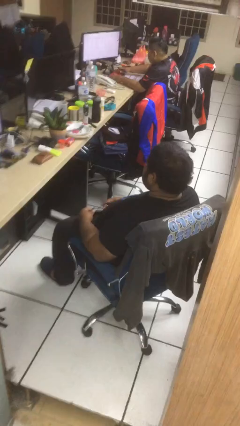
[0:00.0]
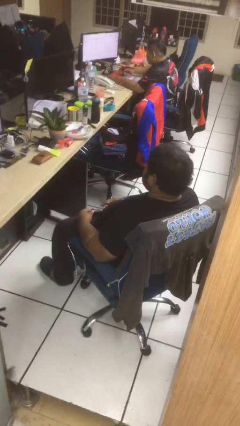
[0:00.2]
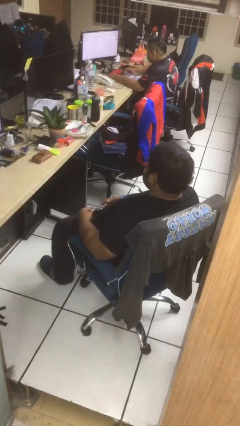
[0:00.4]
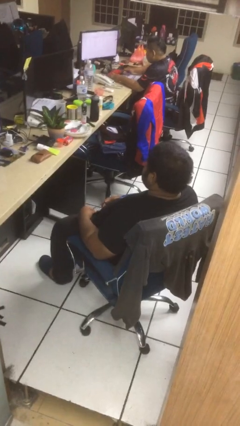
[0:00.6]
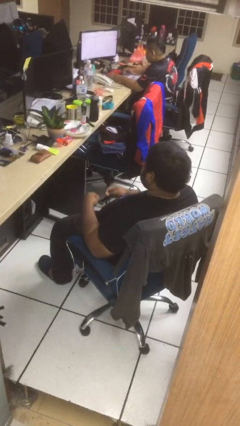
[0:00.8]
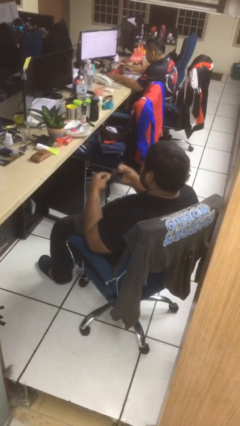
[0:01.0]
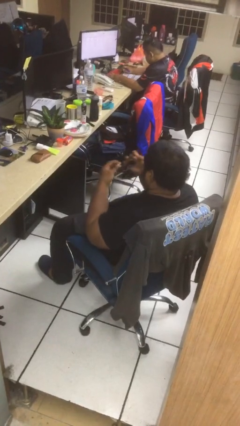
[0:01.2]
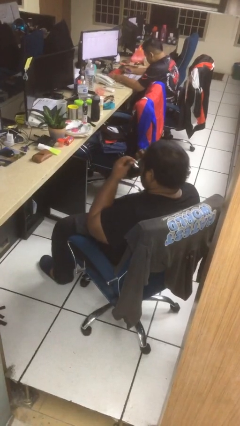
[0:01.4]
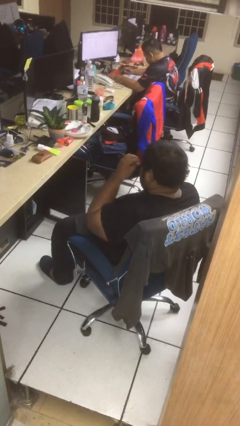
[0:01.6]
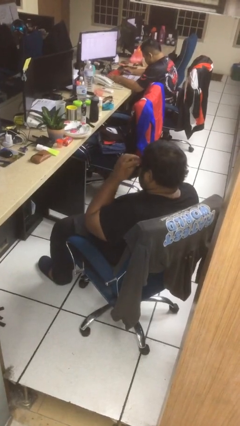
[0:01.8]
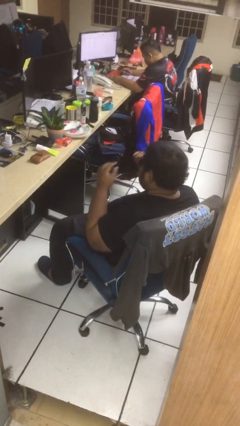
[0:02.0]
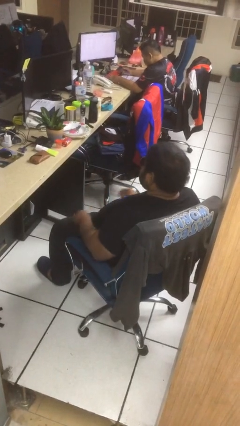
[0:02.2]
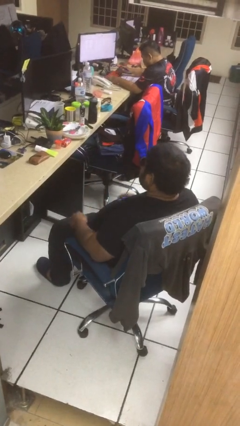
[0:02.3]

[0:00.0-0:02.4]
person puts on sunglasses

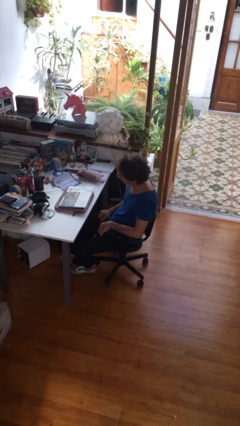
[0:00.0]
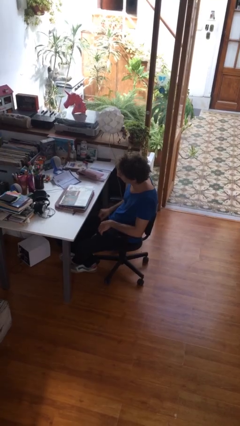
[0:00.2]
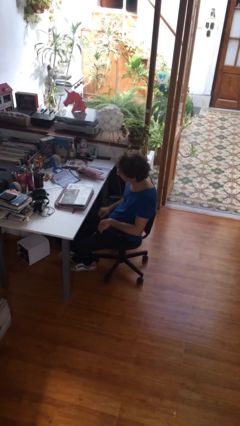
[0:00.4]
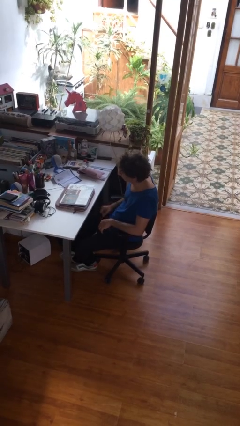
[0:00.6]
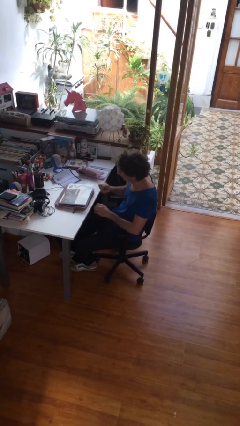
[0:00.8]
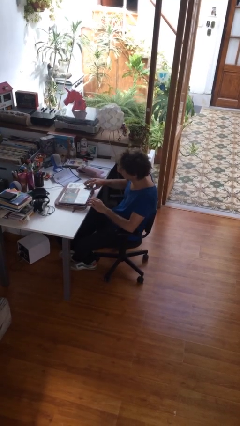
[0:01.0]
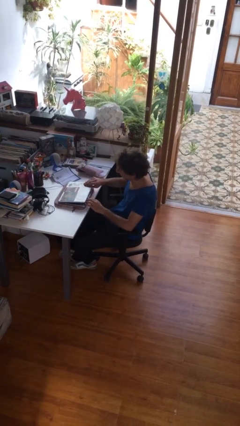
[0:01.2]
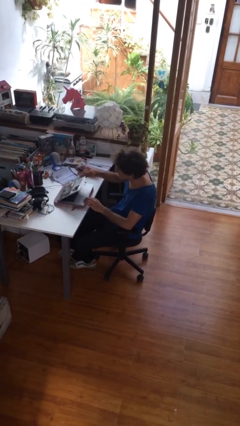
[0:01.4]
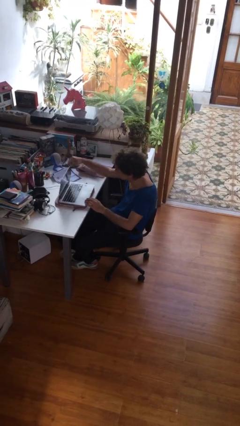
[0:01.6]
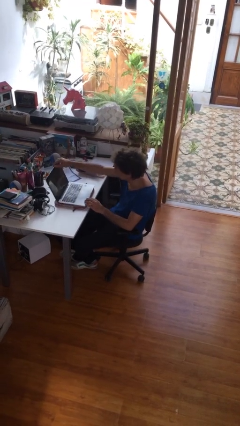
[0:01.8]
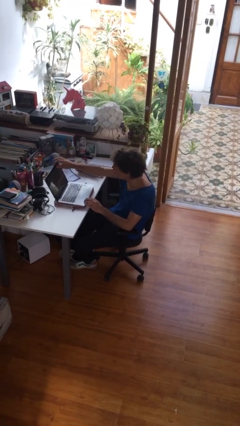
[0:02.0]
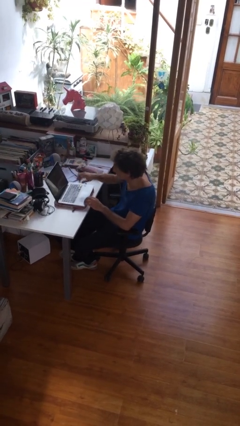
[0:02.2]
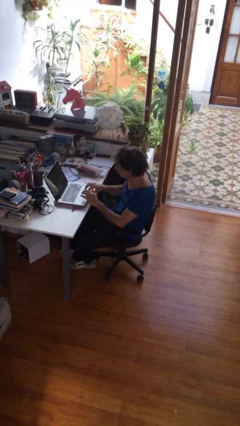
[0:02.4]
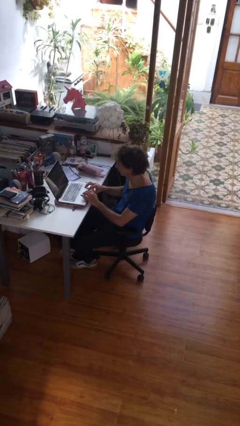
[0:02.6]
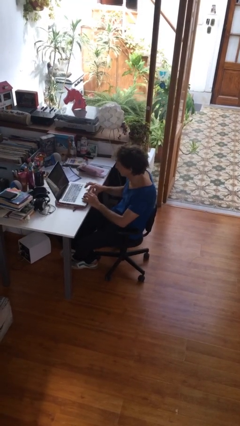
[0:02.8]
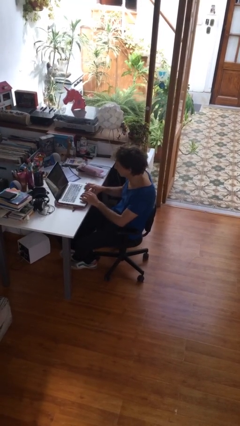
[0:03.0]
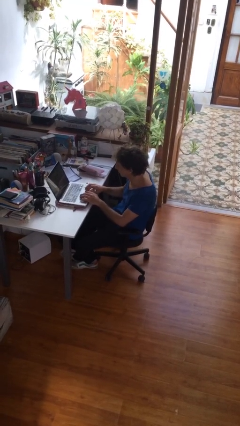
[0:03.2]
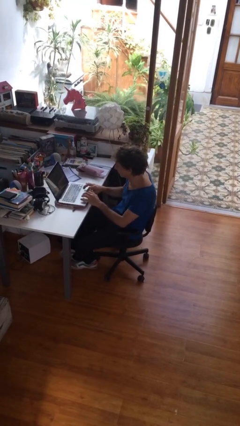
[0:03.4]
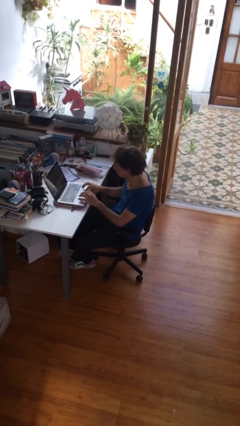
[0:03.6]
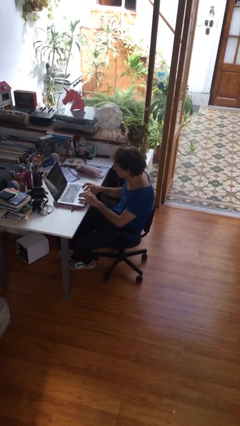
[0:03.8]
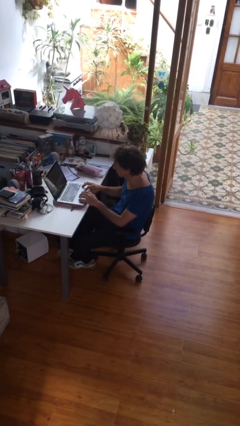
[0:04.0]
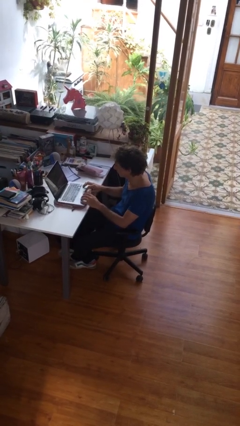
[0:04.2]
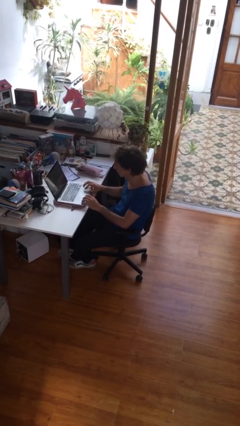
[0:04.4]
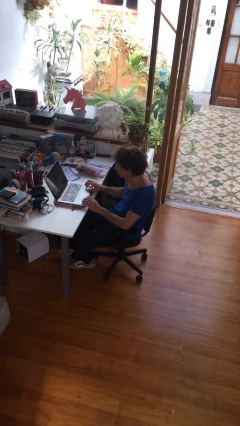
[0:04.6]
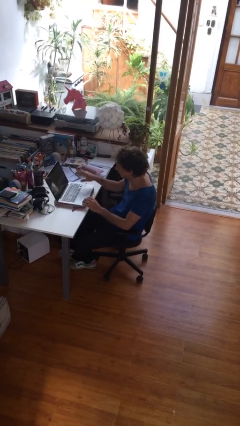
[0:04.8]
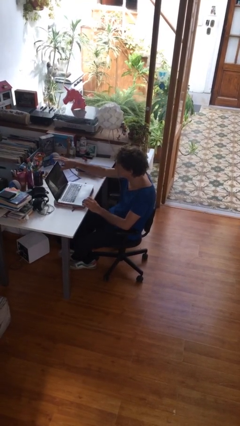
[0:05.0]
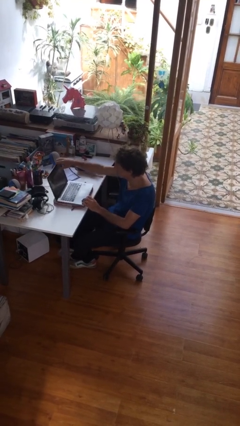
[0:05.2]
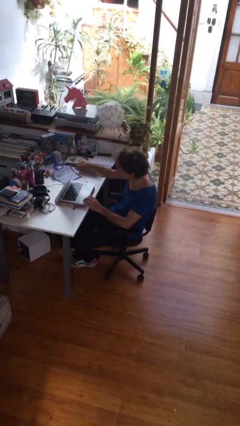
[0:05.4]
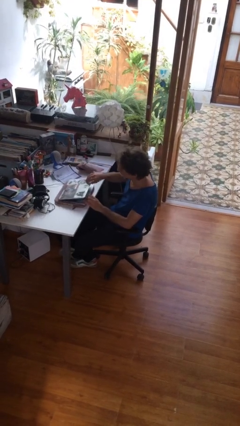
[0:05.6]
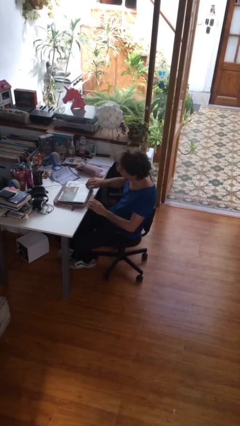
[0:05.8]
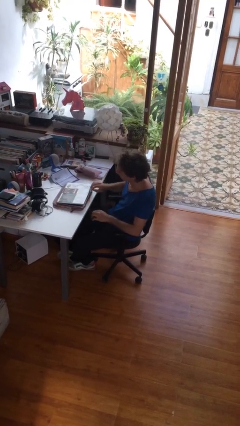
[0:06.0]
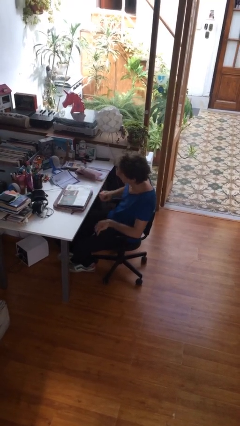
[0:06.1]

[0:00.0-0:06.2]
person interacts with laptop

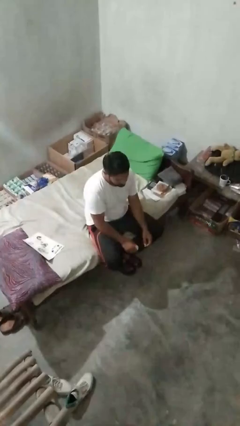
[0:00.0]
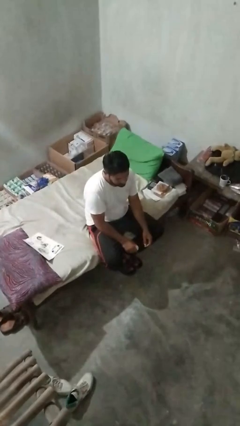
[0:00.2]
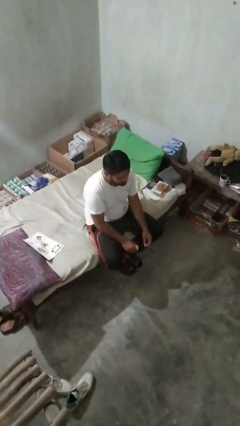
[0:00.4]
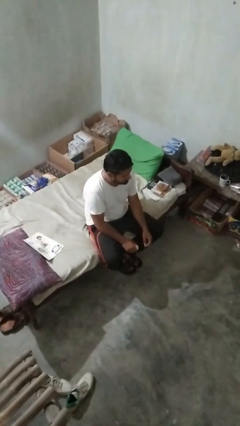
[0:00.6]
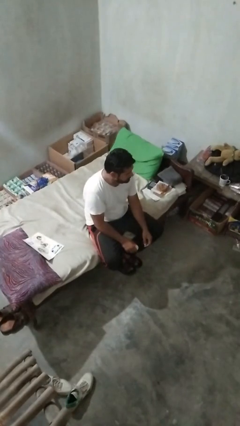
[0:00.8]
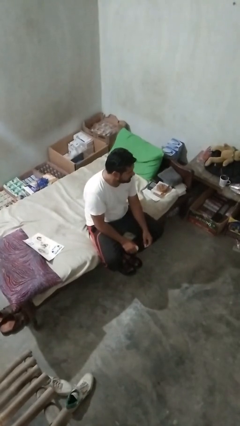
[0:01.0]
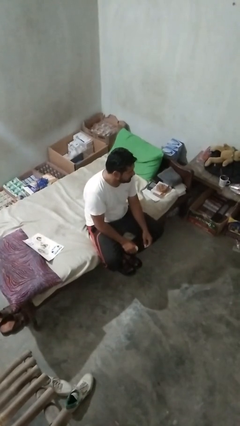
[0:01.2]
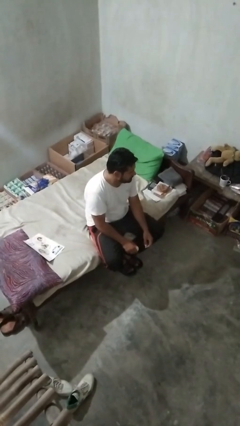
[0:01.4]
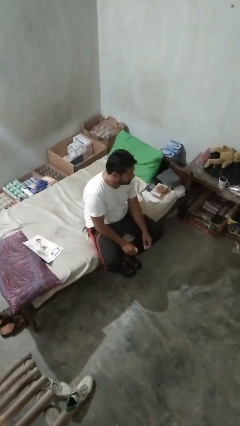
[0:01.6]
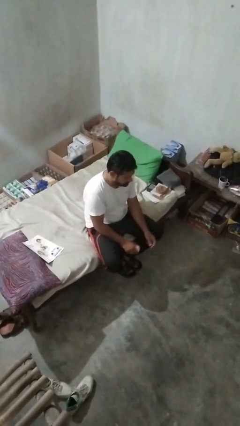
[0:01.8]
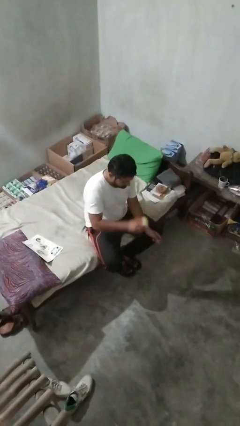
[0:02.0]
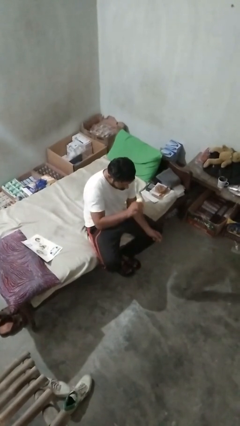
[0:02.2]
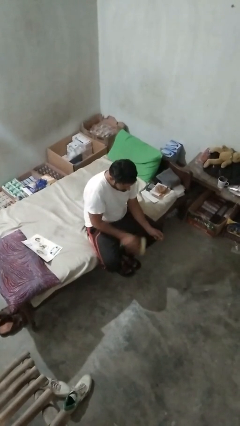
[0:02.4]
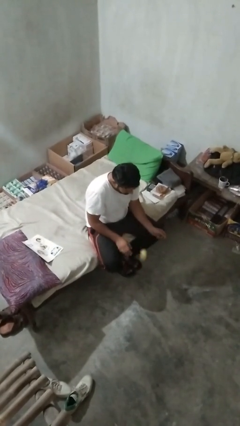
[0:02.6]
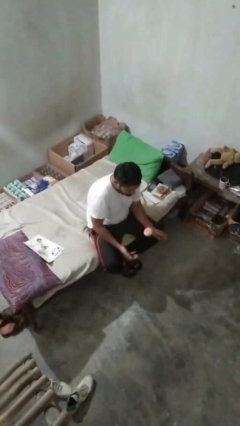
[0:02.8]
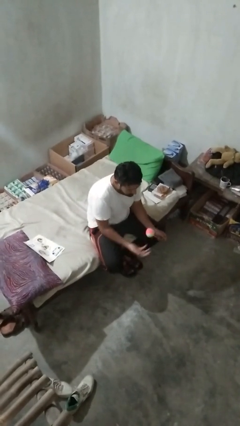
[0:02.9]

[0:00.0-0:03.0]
person bounces ball on floor

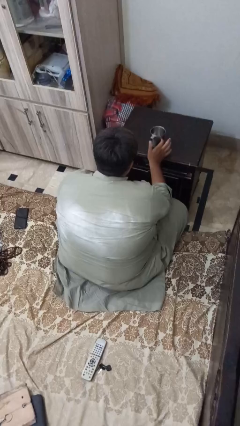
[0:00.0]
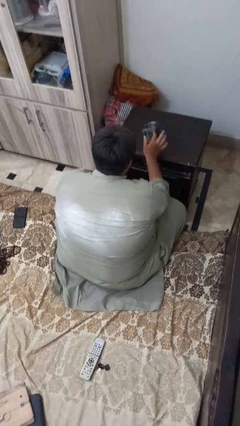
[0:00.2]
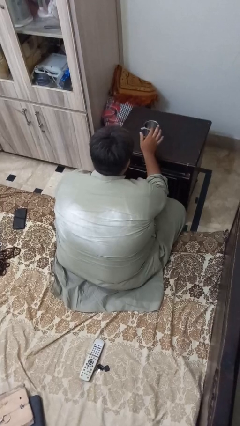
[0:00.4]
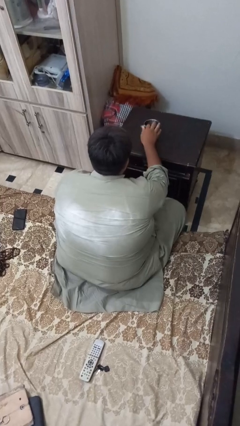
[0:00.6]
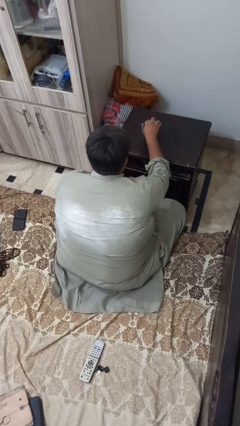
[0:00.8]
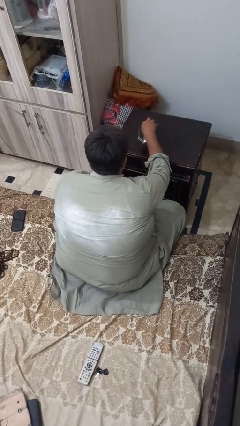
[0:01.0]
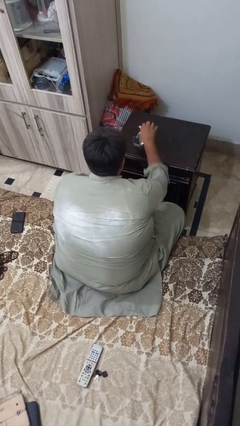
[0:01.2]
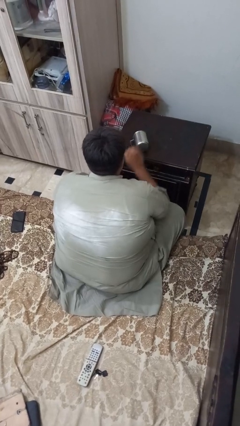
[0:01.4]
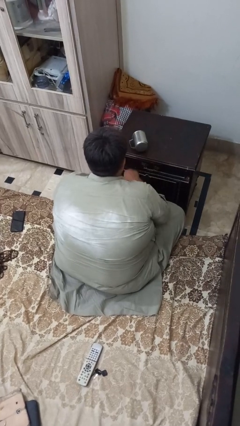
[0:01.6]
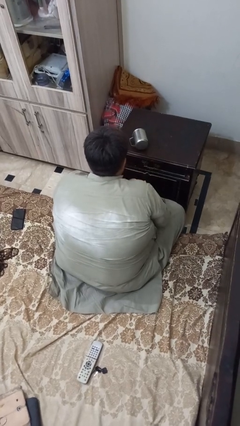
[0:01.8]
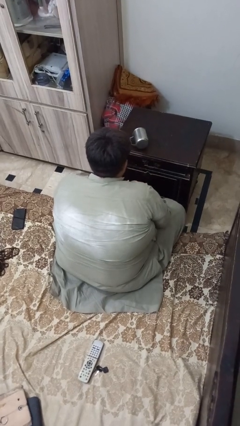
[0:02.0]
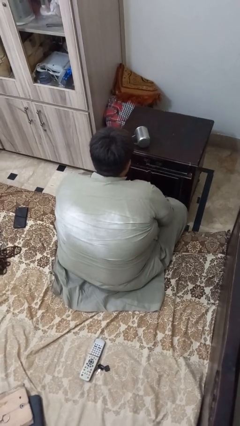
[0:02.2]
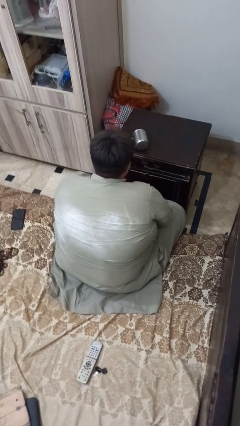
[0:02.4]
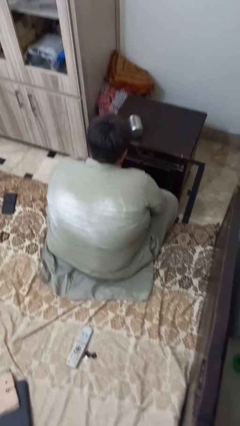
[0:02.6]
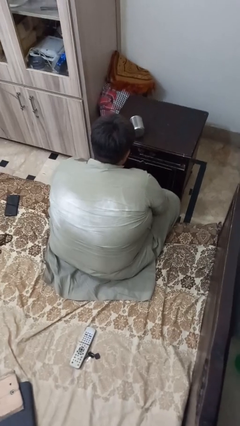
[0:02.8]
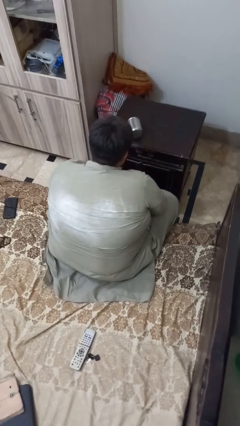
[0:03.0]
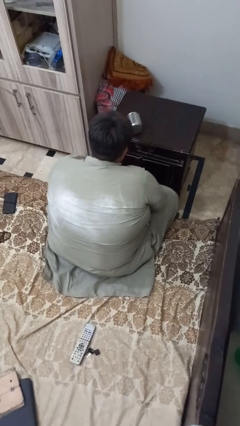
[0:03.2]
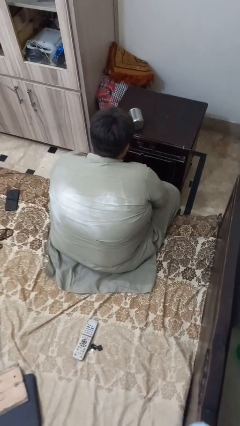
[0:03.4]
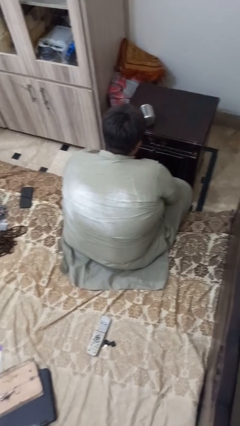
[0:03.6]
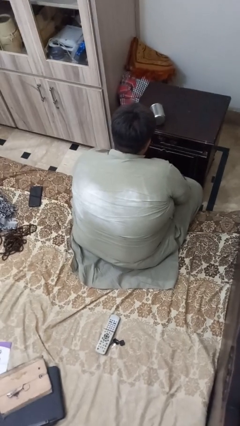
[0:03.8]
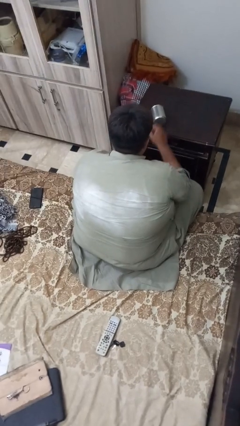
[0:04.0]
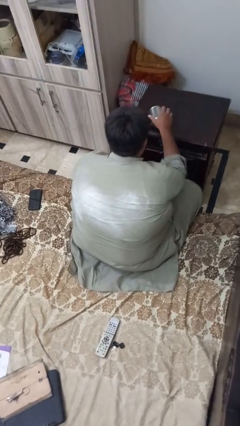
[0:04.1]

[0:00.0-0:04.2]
person knocks over glass

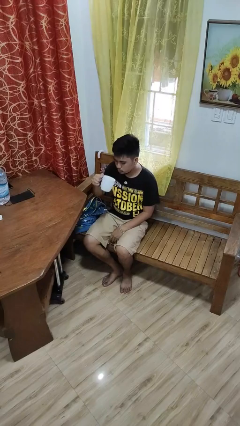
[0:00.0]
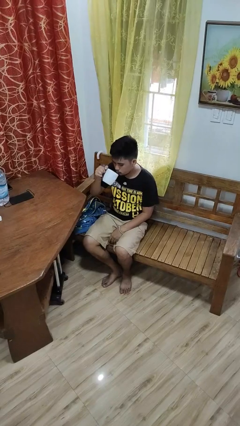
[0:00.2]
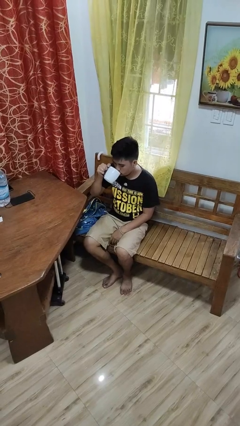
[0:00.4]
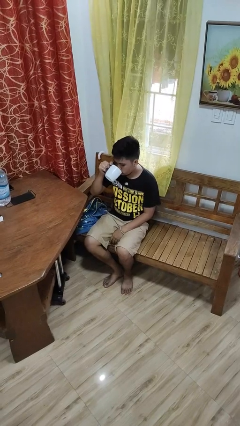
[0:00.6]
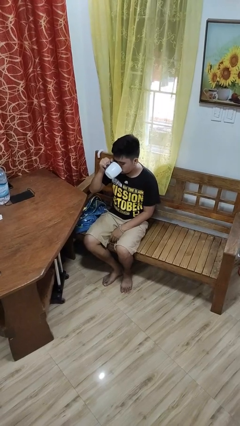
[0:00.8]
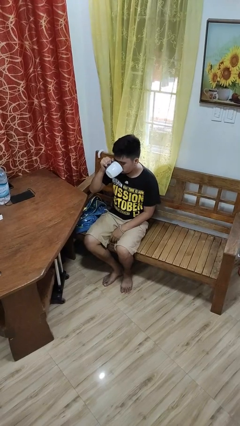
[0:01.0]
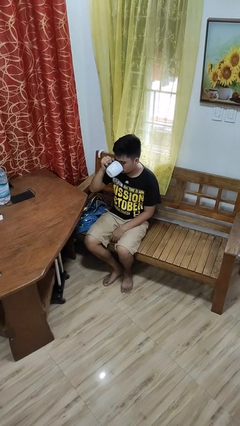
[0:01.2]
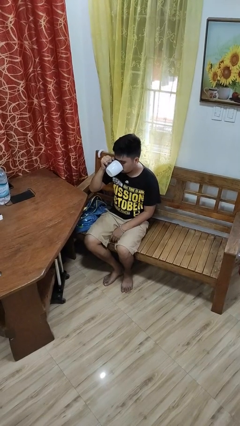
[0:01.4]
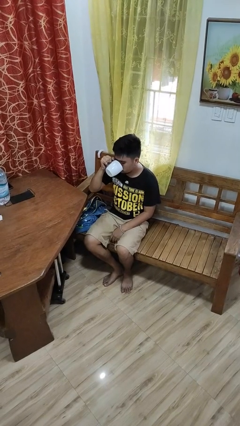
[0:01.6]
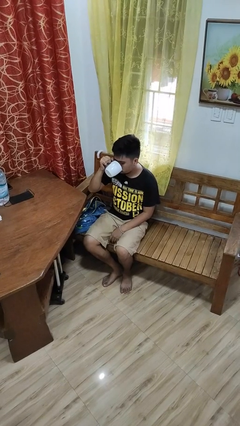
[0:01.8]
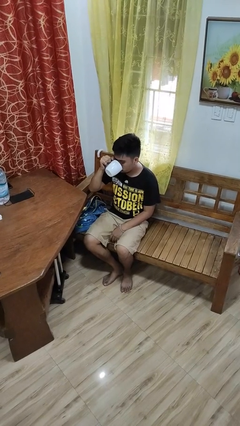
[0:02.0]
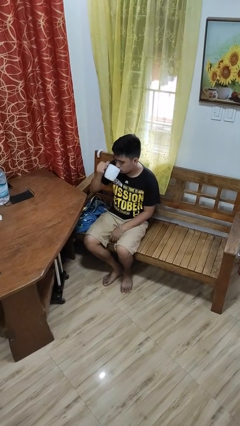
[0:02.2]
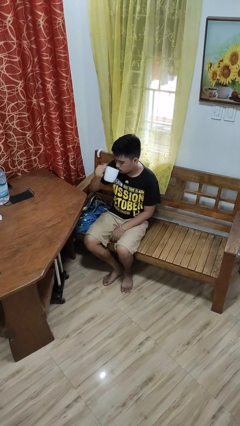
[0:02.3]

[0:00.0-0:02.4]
person drinks from mug
